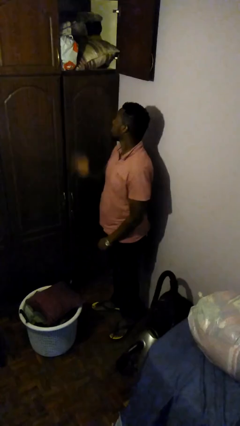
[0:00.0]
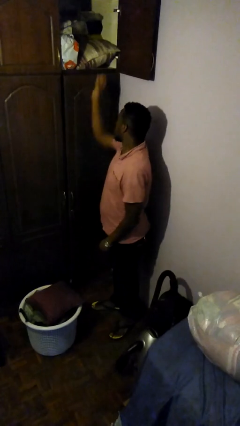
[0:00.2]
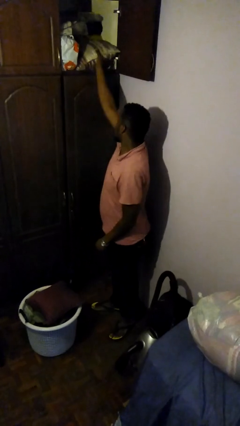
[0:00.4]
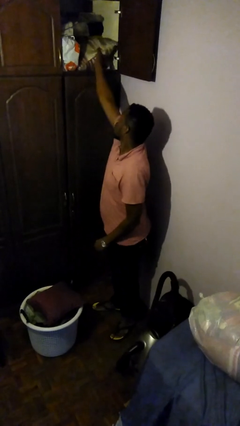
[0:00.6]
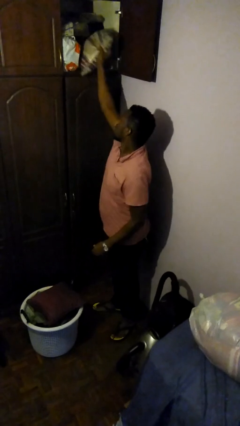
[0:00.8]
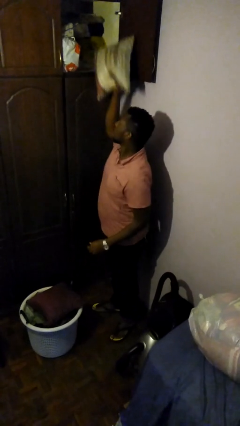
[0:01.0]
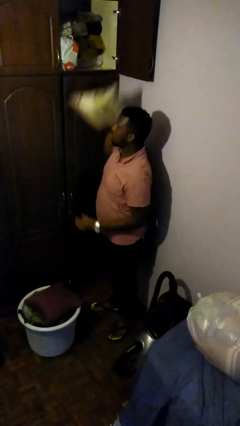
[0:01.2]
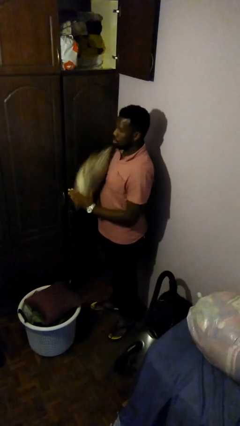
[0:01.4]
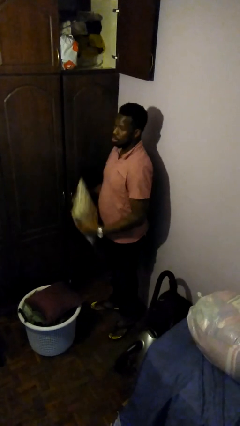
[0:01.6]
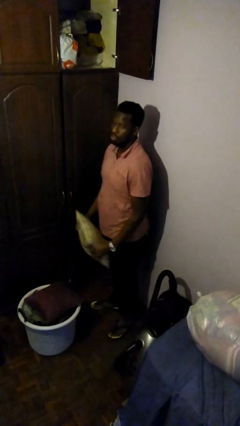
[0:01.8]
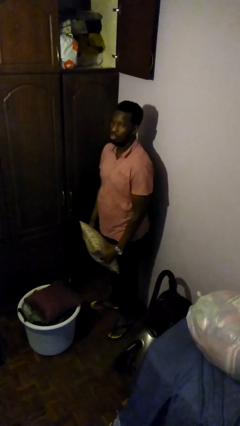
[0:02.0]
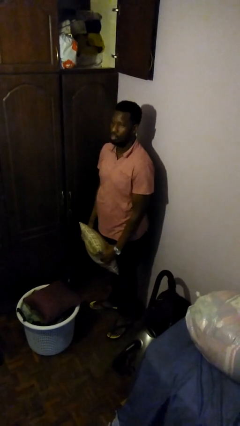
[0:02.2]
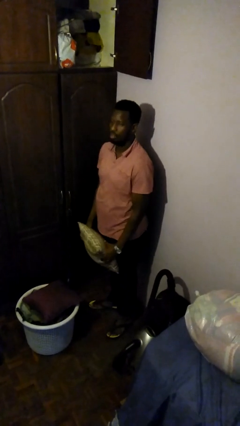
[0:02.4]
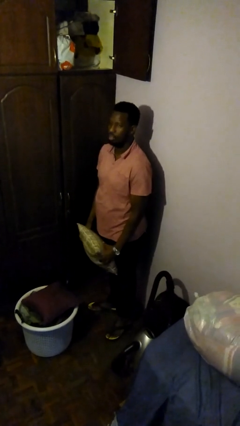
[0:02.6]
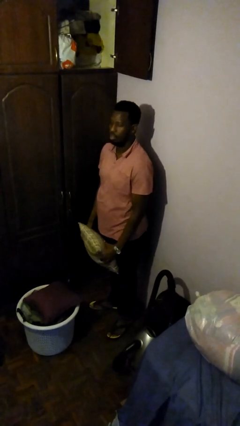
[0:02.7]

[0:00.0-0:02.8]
person picks up object from shelf

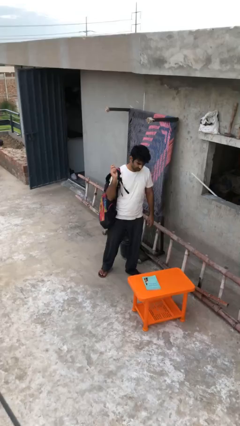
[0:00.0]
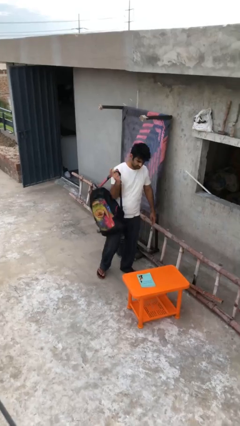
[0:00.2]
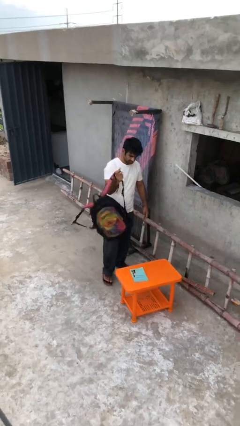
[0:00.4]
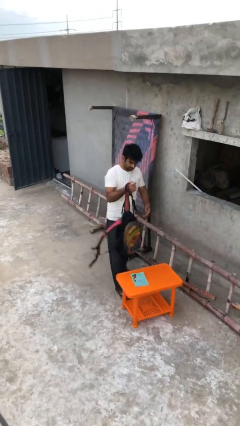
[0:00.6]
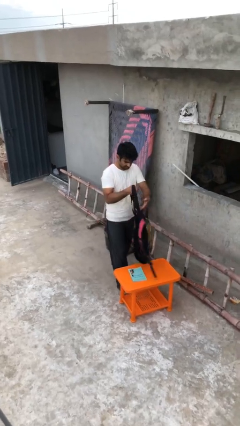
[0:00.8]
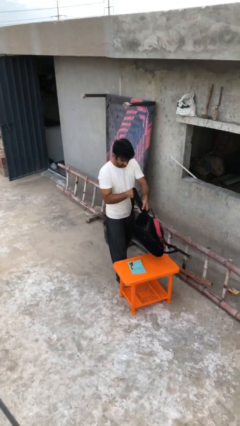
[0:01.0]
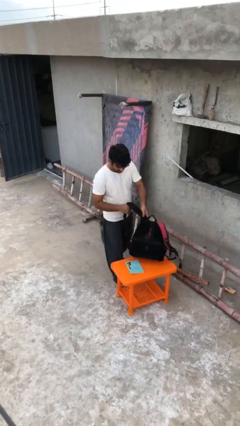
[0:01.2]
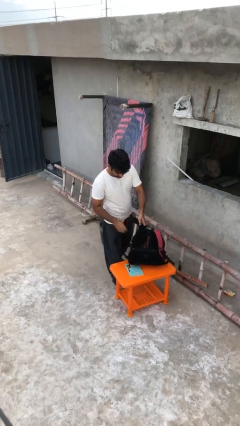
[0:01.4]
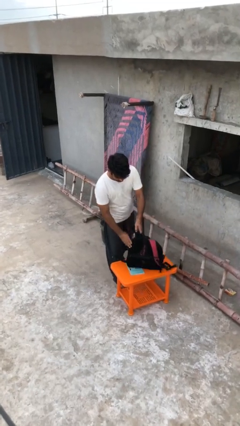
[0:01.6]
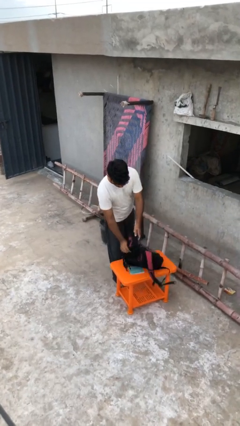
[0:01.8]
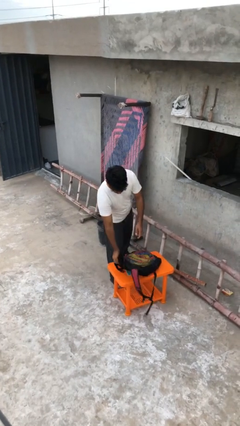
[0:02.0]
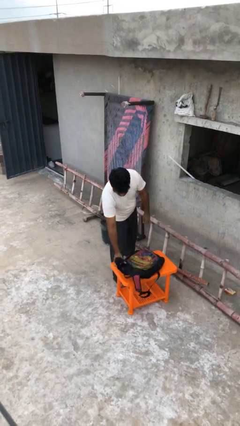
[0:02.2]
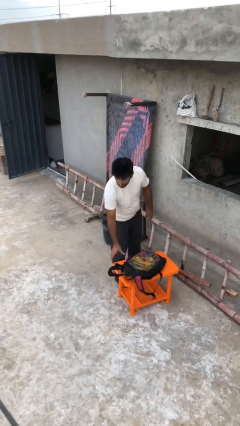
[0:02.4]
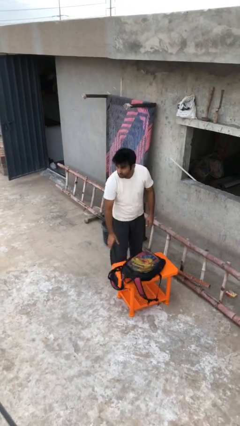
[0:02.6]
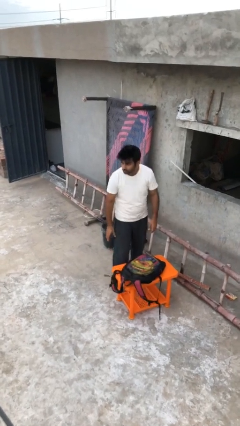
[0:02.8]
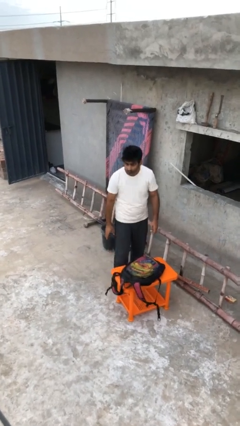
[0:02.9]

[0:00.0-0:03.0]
person puts down object on table

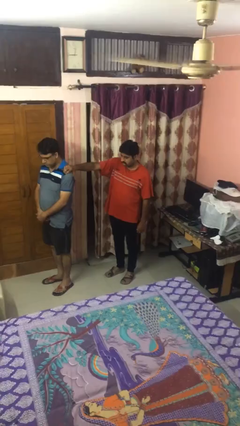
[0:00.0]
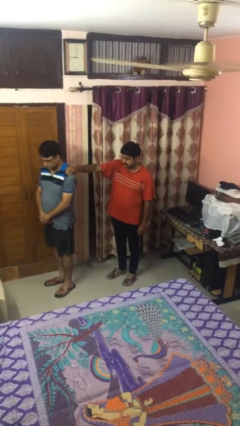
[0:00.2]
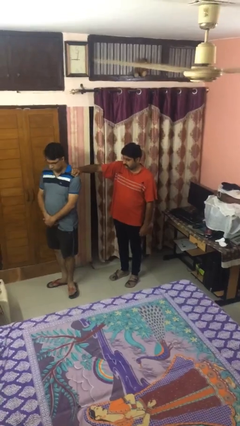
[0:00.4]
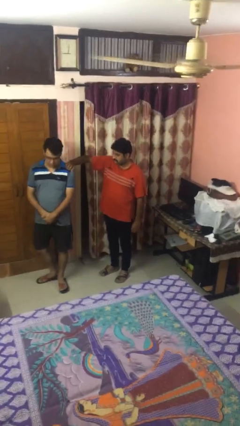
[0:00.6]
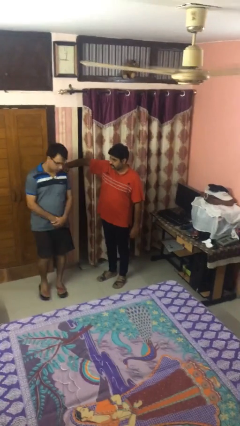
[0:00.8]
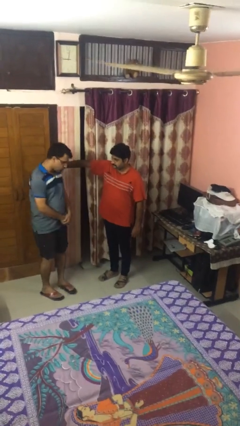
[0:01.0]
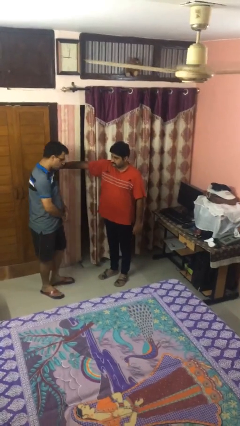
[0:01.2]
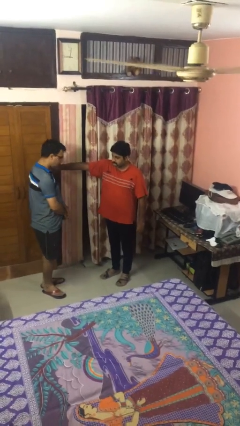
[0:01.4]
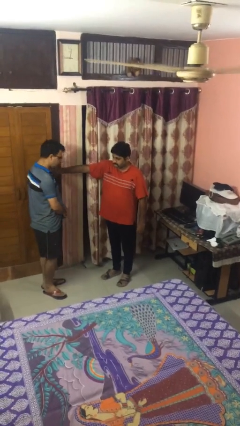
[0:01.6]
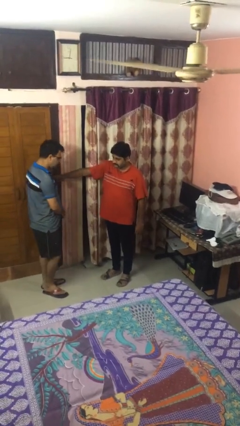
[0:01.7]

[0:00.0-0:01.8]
person spins person around

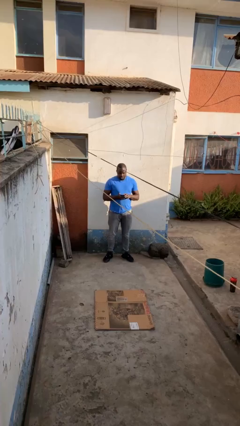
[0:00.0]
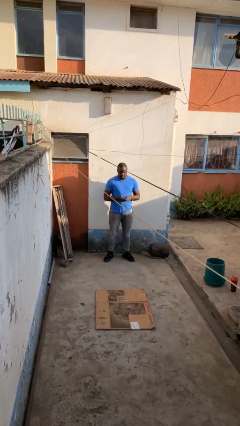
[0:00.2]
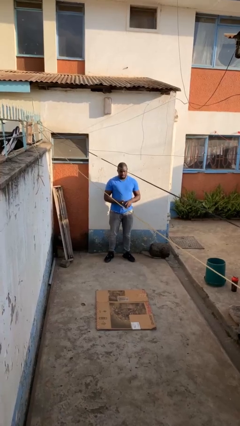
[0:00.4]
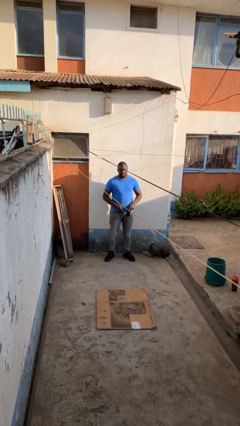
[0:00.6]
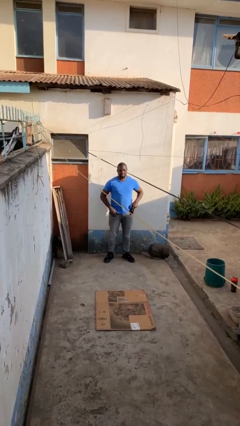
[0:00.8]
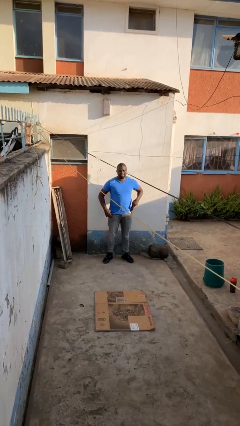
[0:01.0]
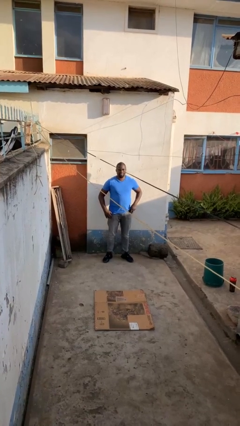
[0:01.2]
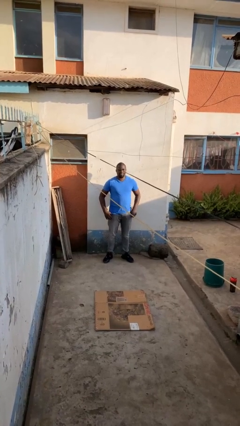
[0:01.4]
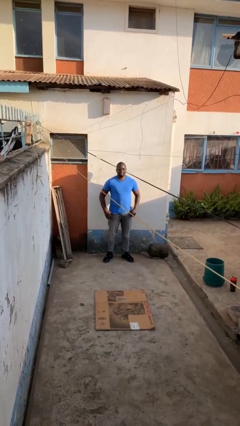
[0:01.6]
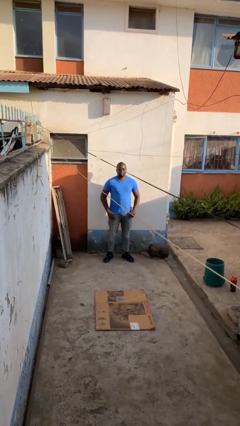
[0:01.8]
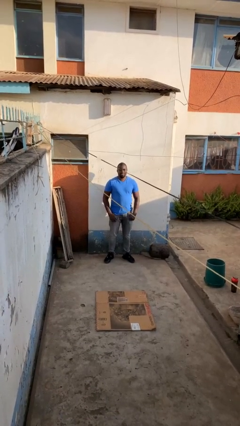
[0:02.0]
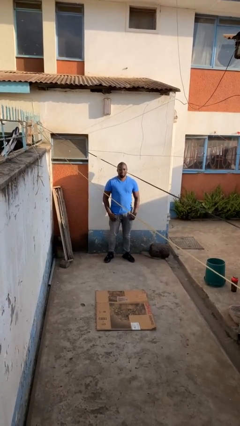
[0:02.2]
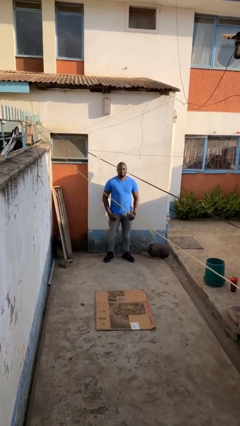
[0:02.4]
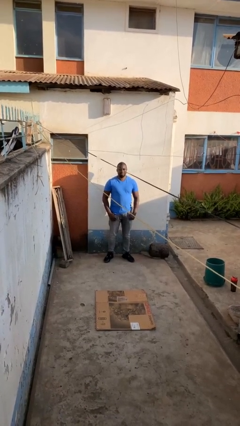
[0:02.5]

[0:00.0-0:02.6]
person puts phone into pocket

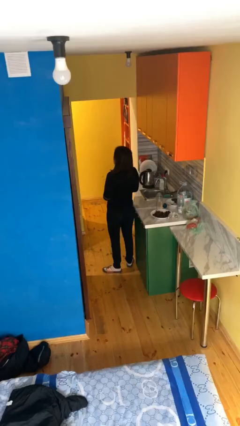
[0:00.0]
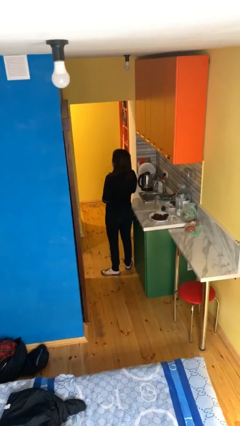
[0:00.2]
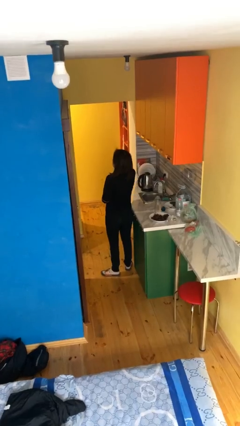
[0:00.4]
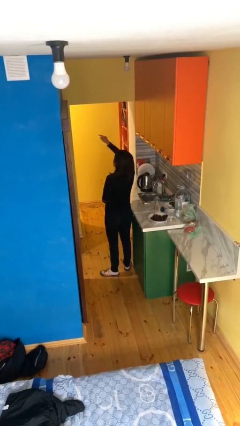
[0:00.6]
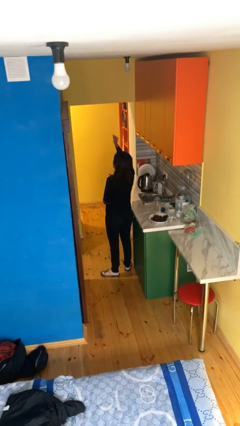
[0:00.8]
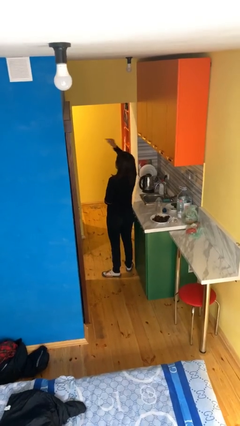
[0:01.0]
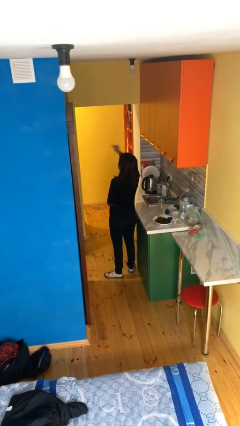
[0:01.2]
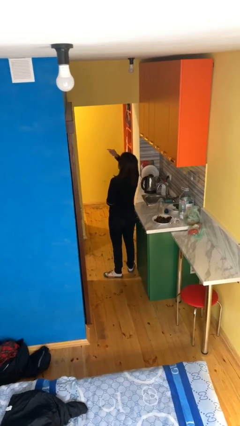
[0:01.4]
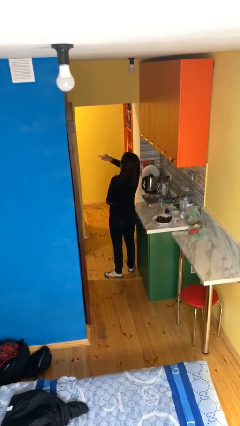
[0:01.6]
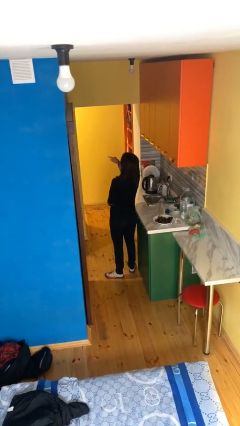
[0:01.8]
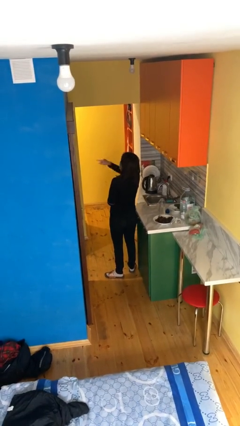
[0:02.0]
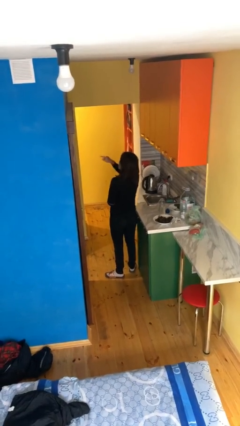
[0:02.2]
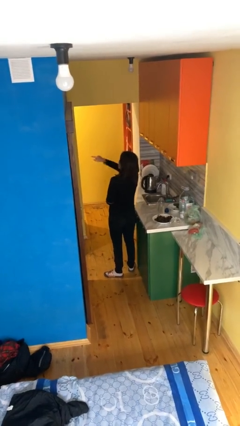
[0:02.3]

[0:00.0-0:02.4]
person points at person

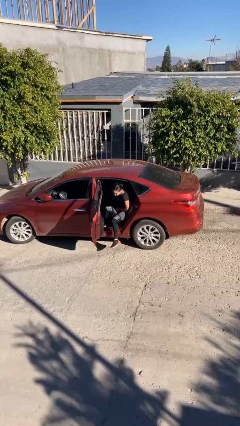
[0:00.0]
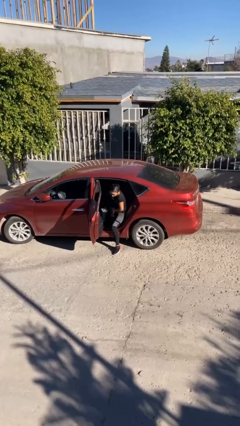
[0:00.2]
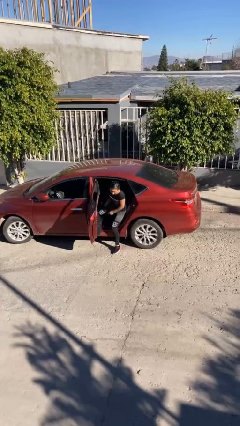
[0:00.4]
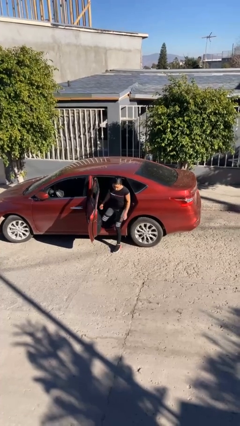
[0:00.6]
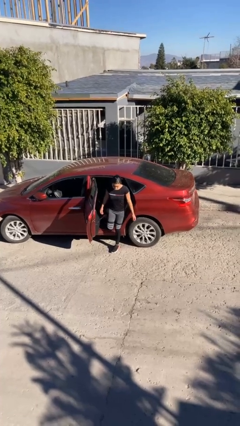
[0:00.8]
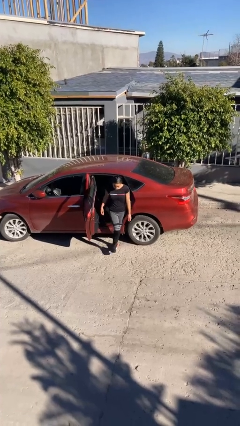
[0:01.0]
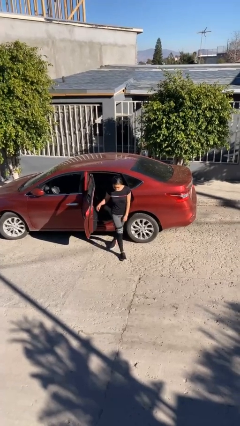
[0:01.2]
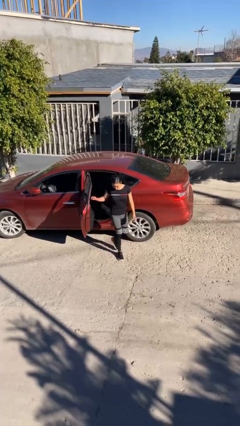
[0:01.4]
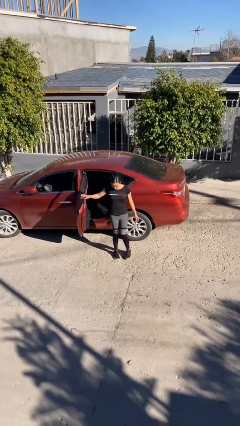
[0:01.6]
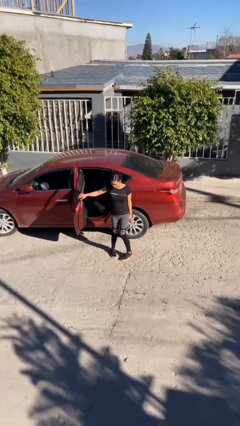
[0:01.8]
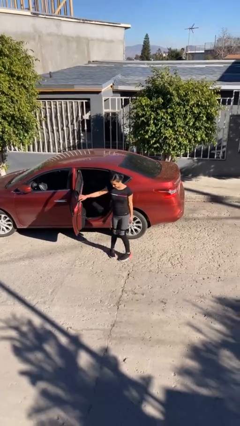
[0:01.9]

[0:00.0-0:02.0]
person exits car

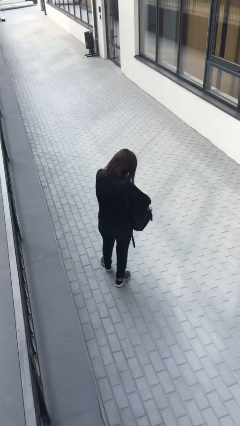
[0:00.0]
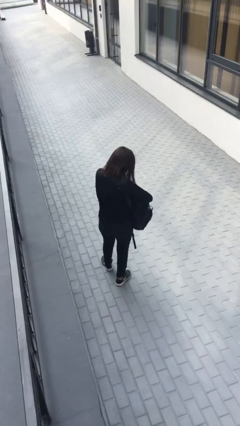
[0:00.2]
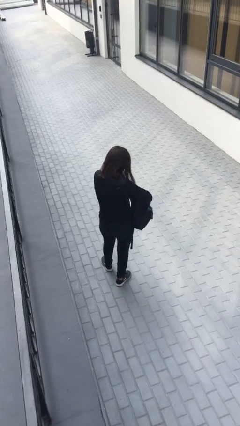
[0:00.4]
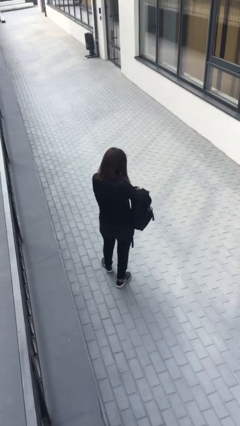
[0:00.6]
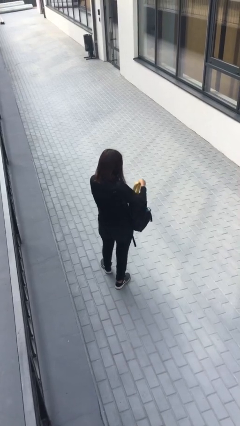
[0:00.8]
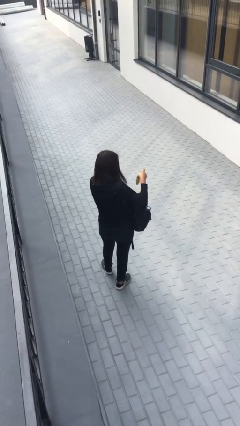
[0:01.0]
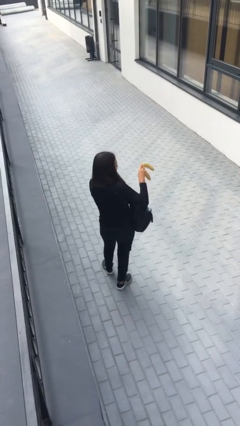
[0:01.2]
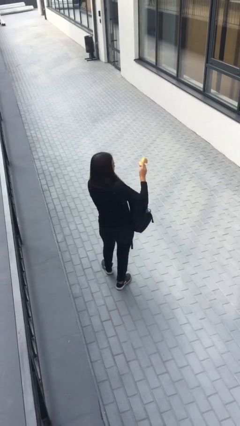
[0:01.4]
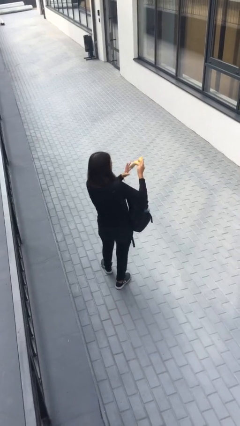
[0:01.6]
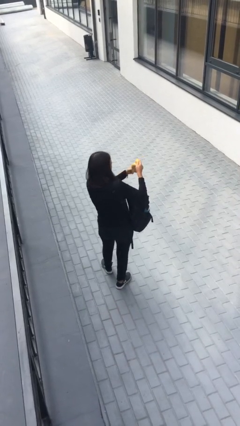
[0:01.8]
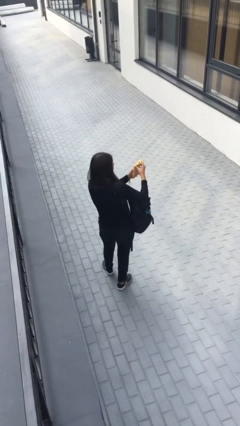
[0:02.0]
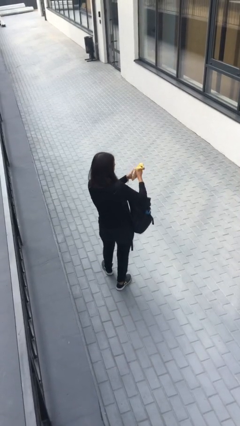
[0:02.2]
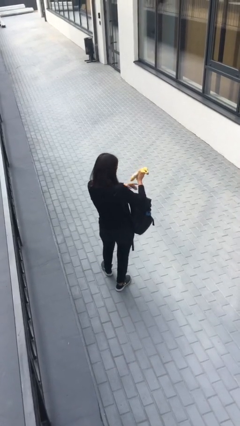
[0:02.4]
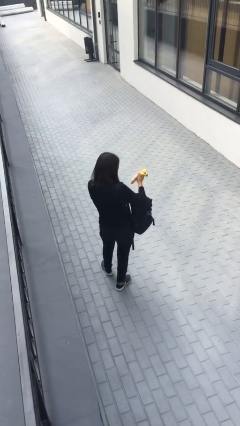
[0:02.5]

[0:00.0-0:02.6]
person takes object from backpack

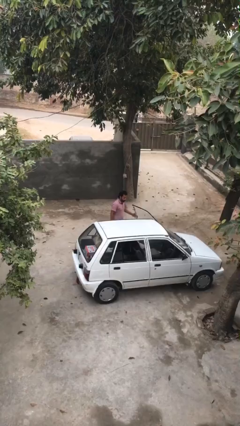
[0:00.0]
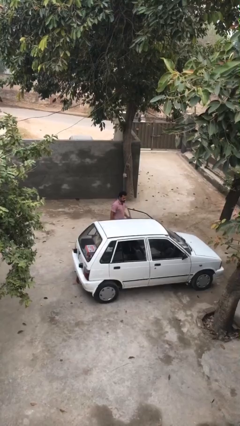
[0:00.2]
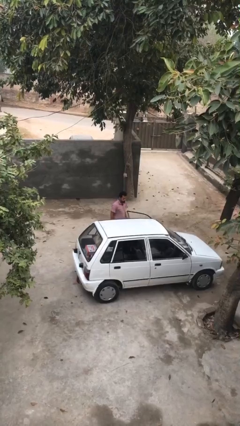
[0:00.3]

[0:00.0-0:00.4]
person closes car door
